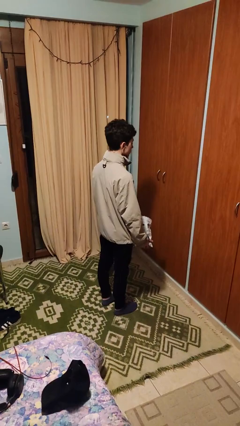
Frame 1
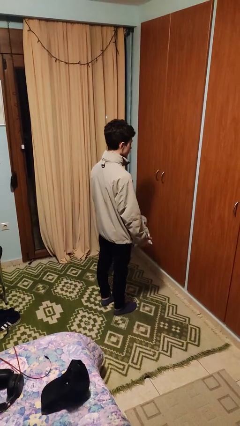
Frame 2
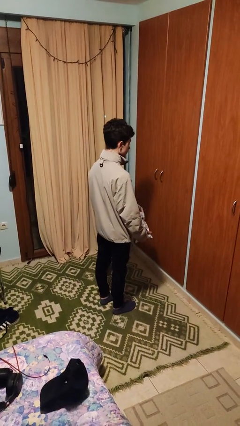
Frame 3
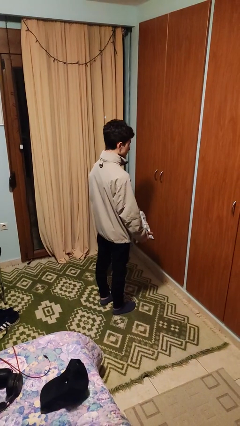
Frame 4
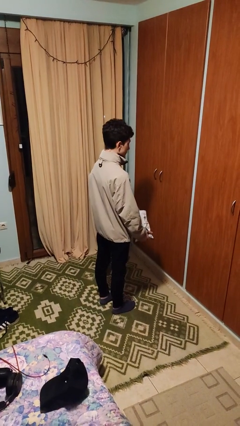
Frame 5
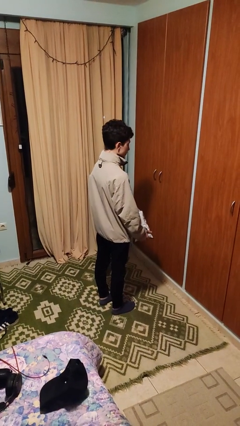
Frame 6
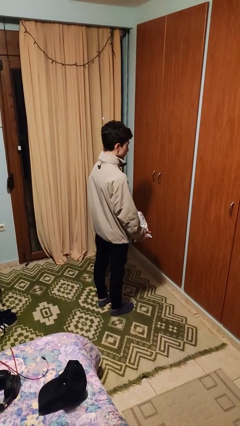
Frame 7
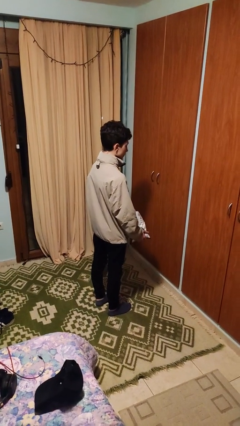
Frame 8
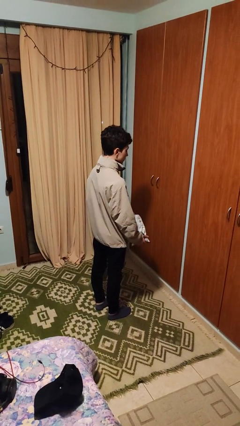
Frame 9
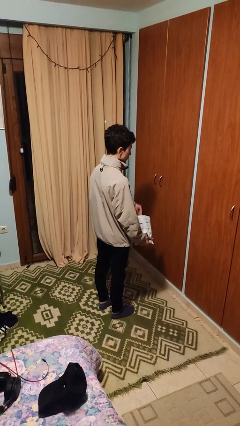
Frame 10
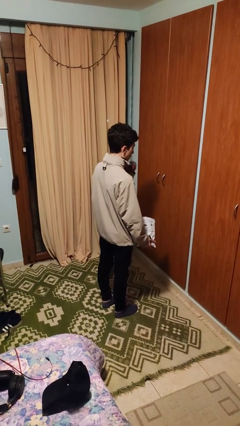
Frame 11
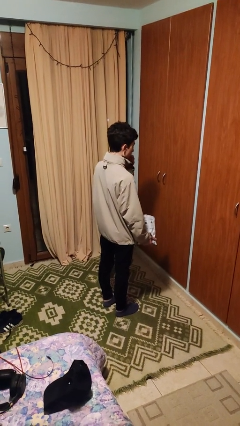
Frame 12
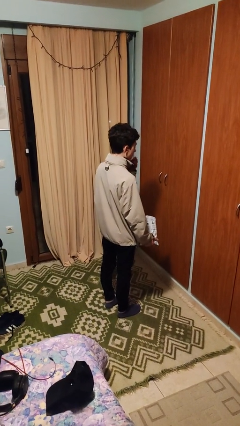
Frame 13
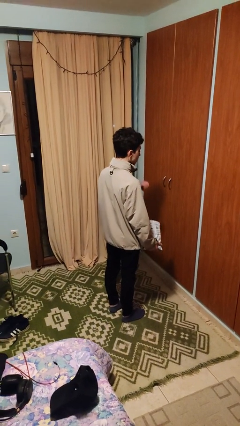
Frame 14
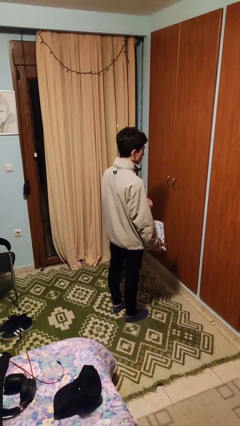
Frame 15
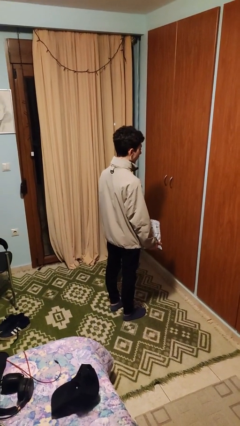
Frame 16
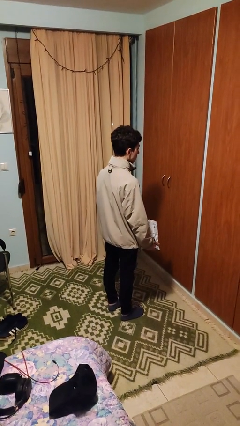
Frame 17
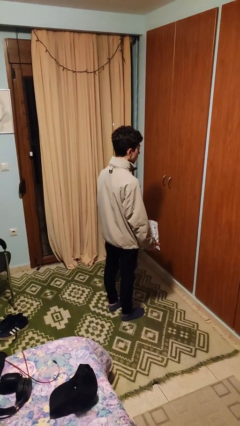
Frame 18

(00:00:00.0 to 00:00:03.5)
person eats snack from bag

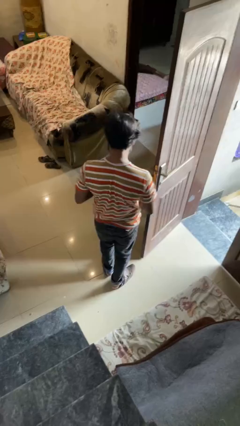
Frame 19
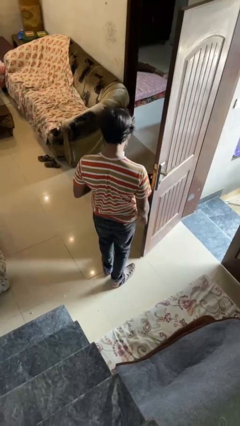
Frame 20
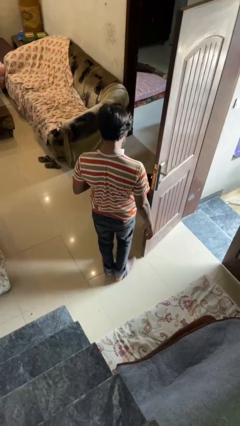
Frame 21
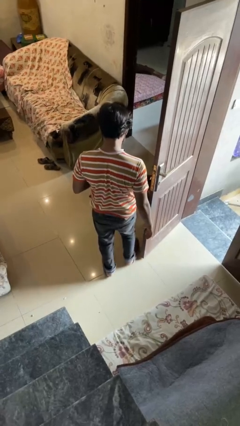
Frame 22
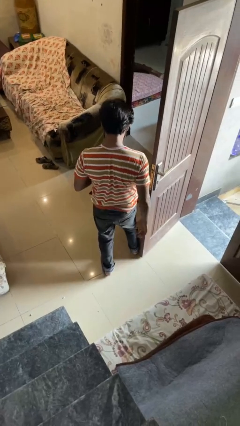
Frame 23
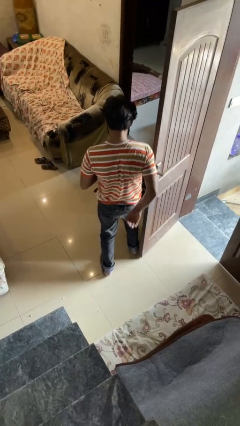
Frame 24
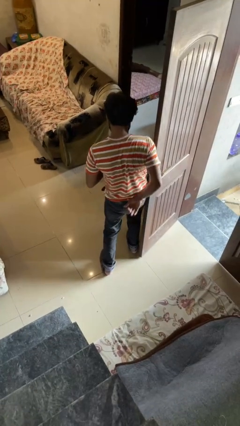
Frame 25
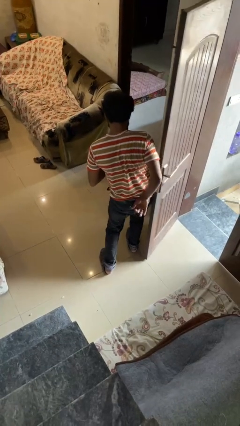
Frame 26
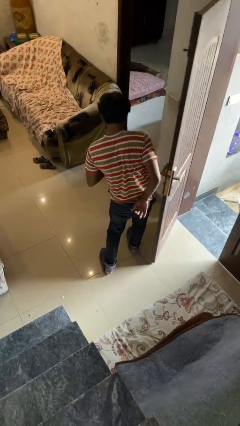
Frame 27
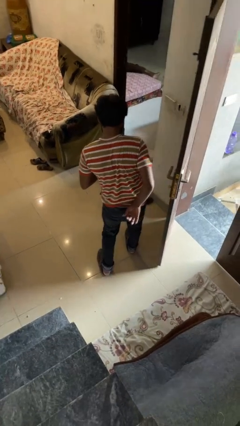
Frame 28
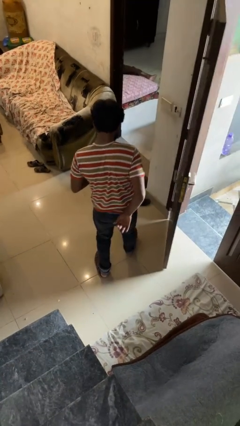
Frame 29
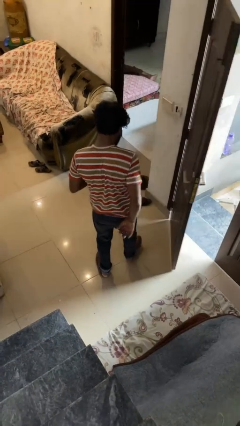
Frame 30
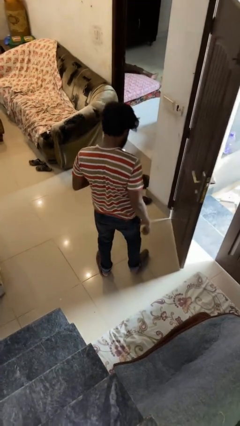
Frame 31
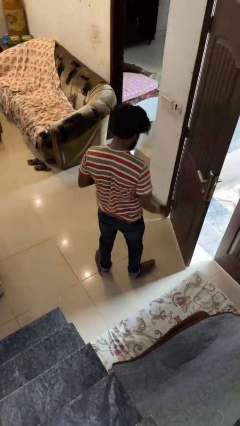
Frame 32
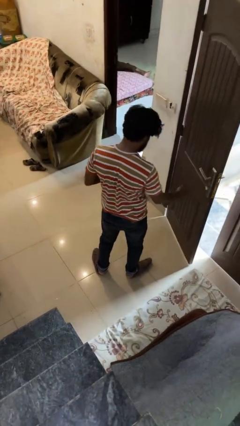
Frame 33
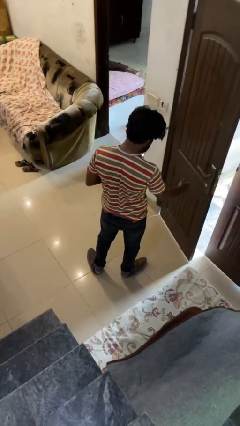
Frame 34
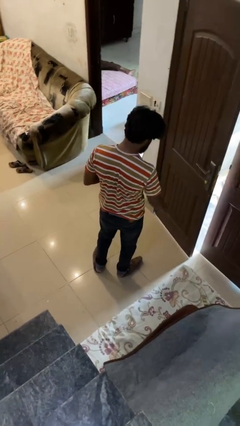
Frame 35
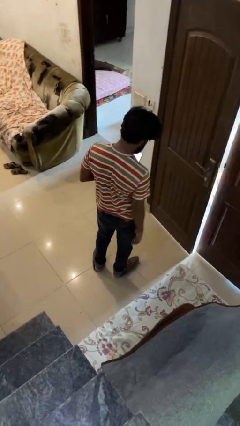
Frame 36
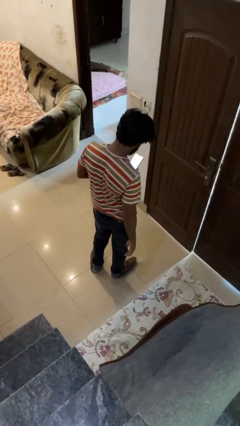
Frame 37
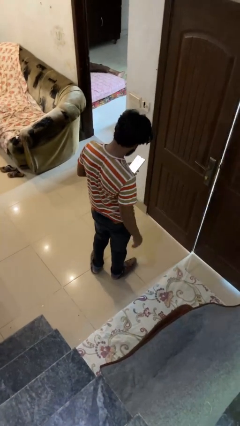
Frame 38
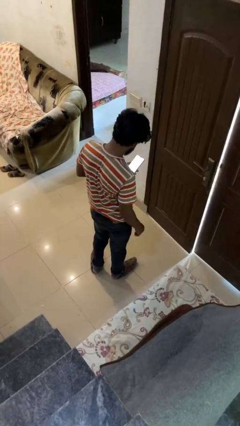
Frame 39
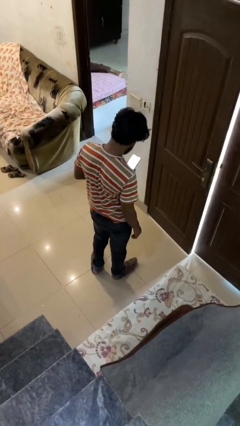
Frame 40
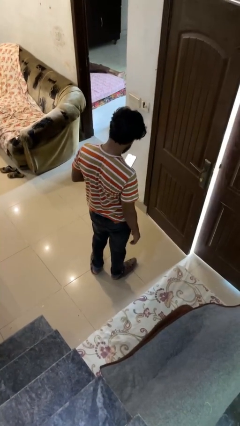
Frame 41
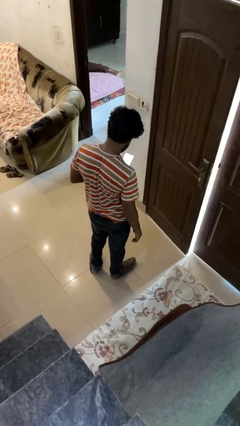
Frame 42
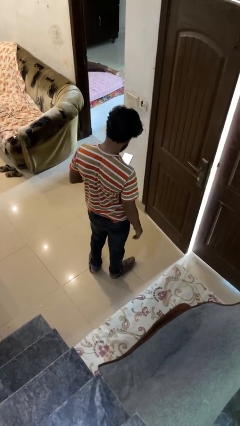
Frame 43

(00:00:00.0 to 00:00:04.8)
person closes door with hip

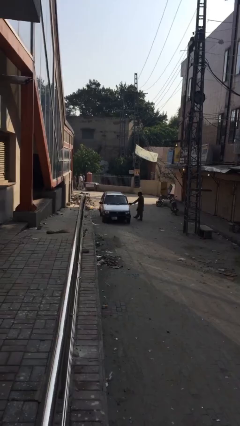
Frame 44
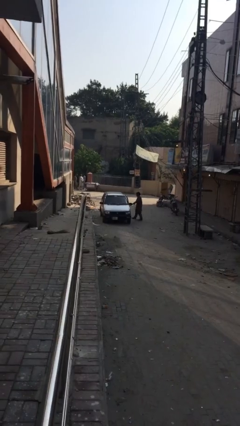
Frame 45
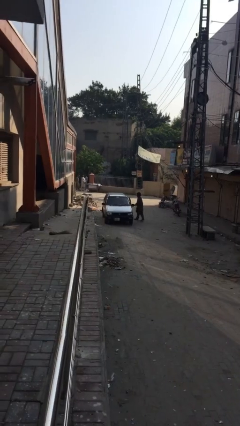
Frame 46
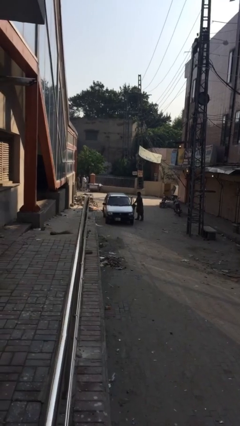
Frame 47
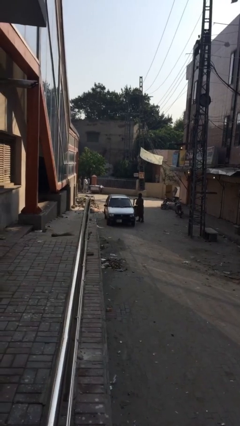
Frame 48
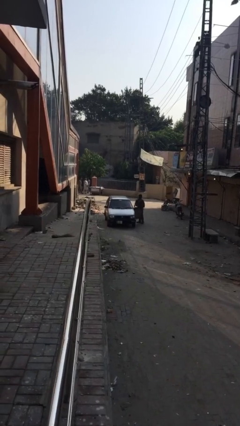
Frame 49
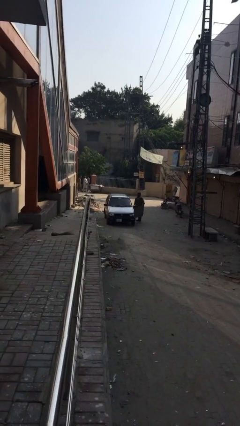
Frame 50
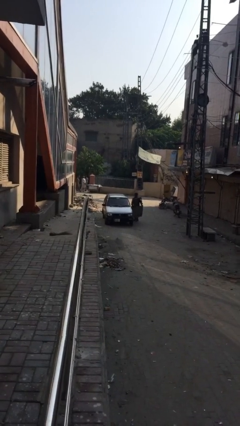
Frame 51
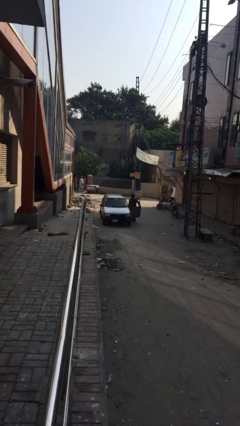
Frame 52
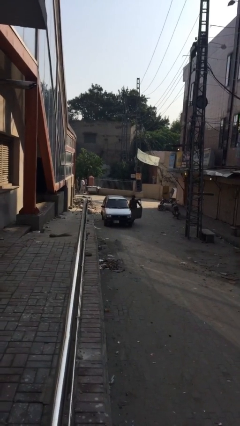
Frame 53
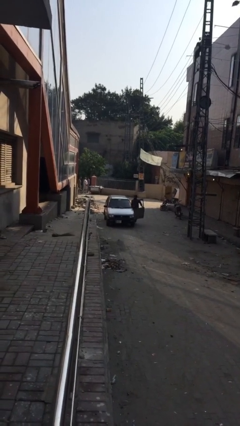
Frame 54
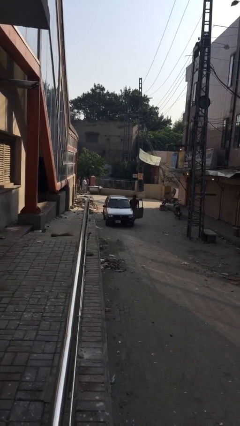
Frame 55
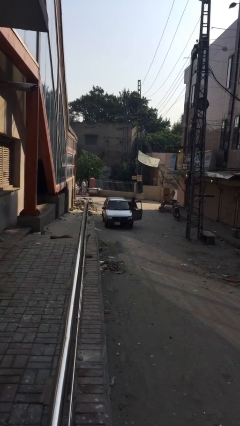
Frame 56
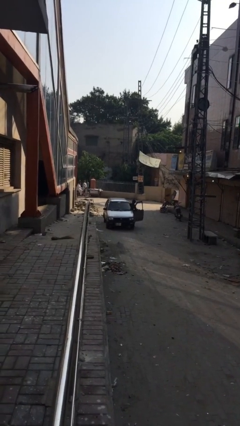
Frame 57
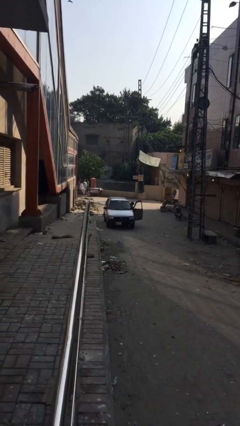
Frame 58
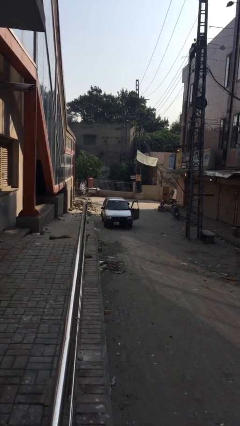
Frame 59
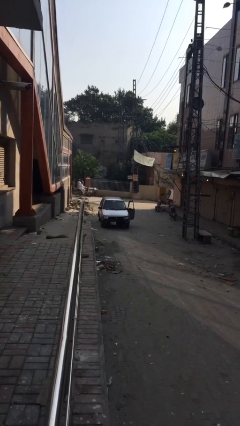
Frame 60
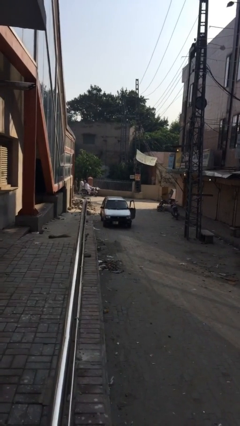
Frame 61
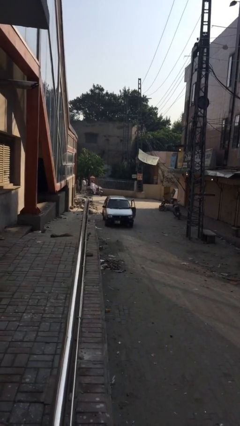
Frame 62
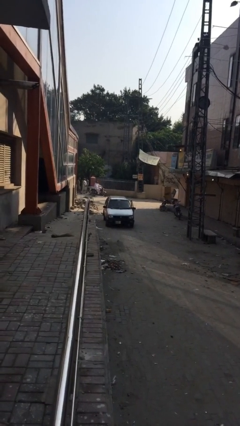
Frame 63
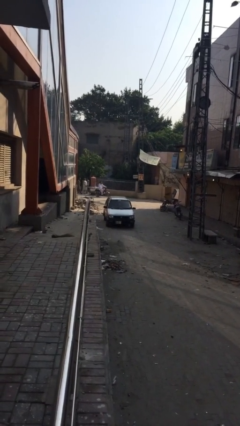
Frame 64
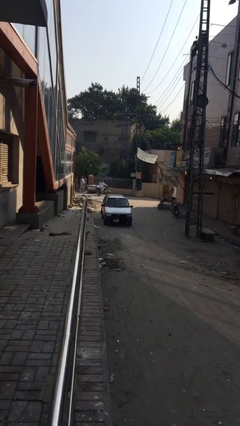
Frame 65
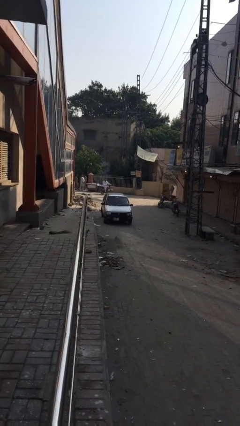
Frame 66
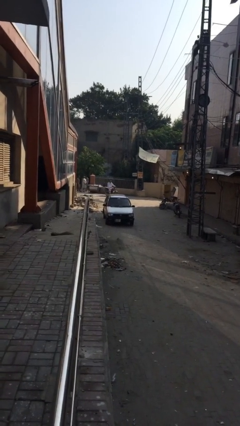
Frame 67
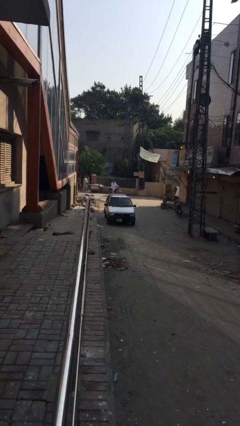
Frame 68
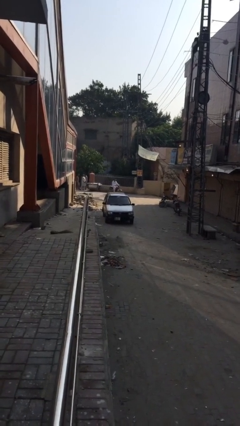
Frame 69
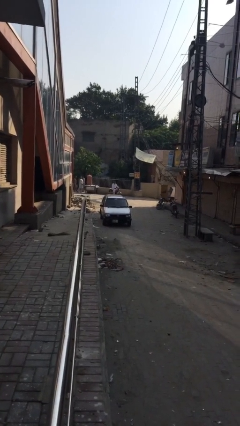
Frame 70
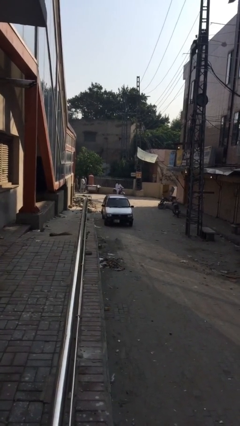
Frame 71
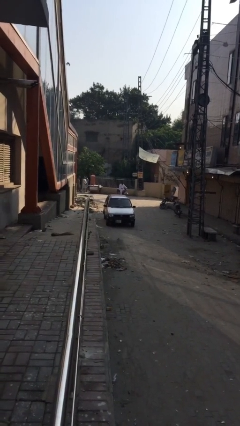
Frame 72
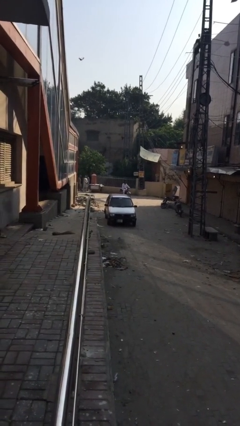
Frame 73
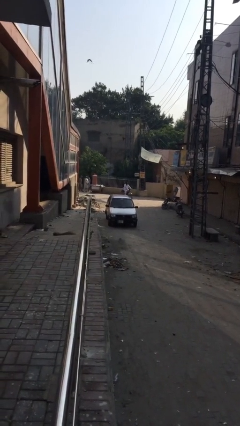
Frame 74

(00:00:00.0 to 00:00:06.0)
car picks up person

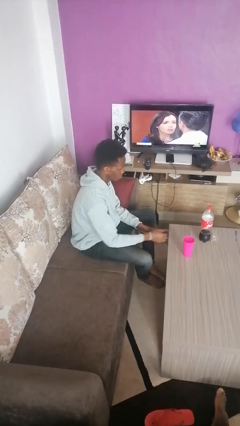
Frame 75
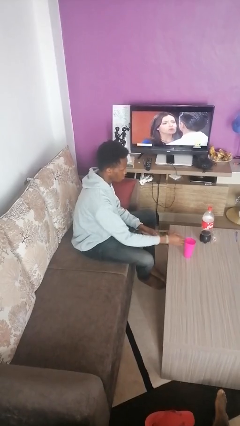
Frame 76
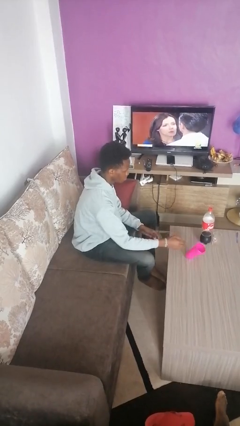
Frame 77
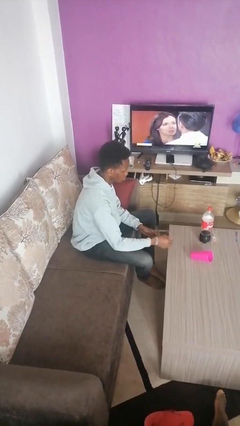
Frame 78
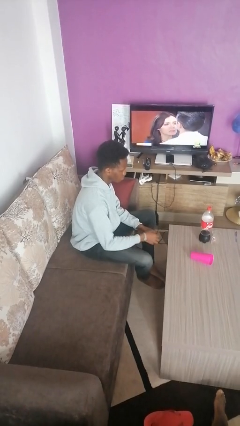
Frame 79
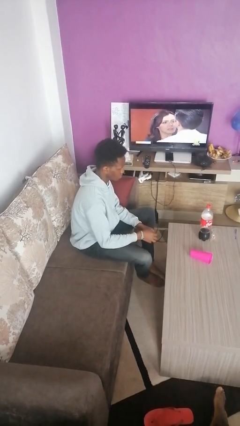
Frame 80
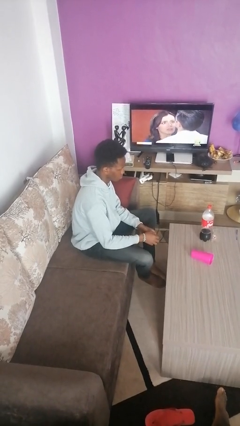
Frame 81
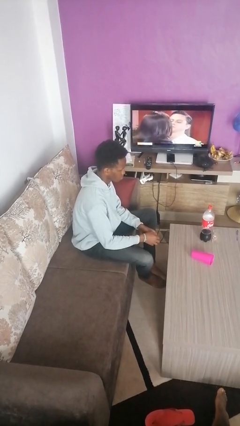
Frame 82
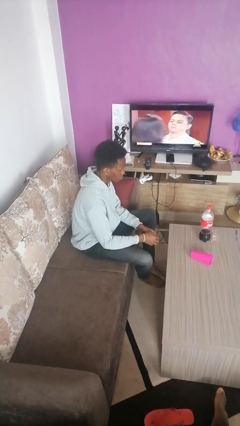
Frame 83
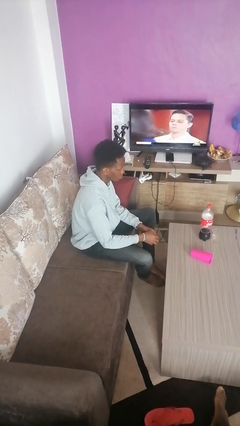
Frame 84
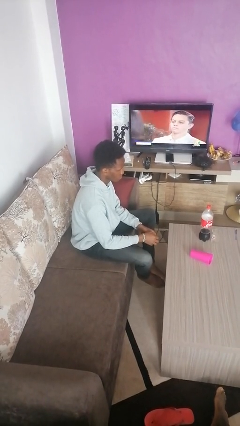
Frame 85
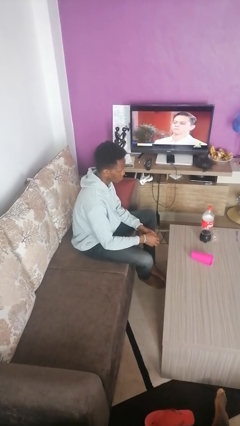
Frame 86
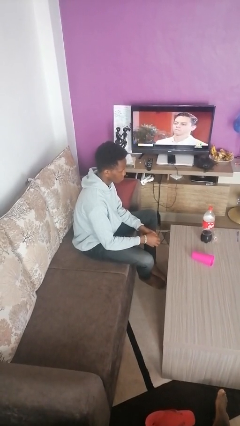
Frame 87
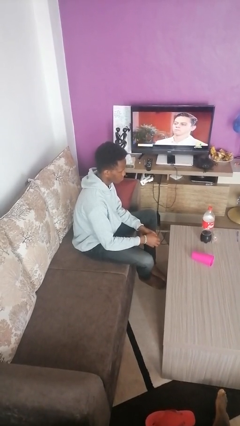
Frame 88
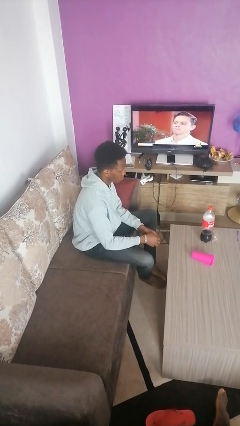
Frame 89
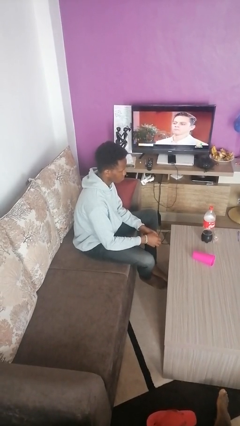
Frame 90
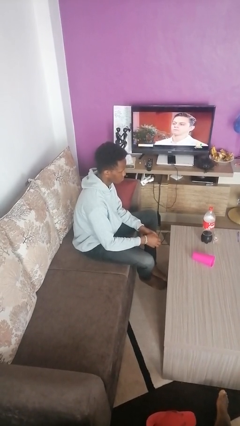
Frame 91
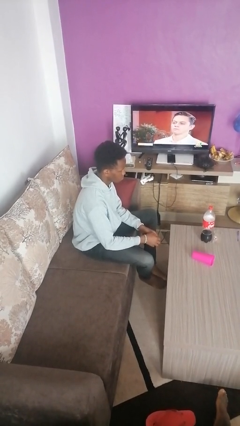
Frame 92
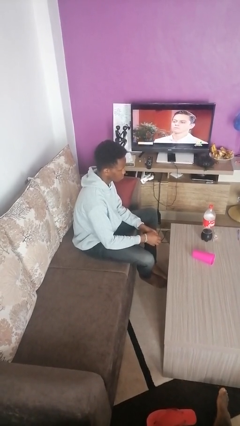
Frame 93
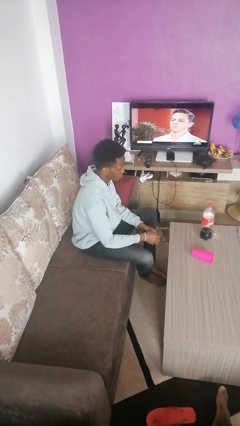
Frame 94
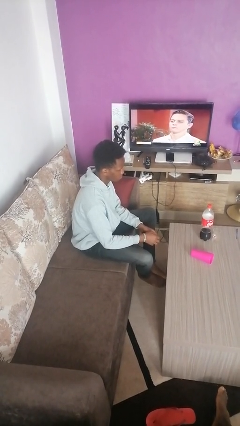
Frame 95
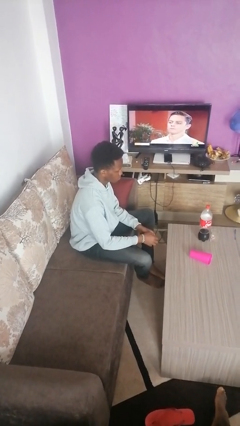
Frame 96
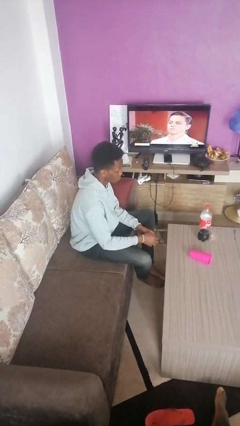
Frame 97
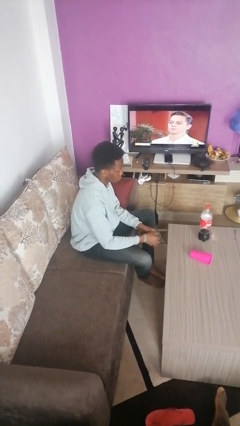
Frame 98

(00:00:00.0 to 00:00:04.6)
person knocks over glass
